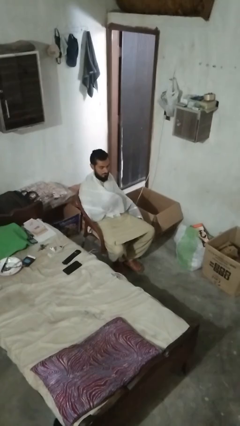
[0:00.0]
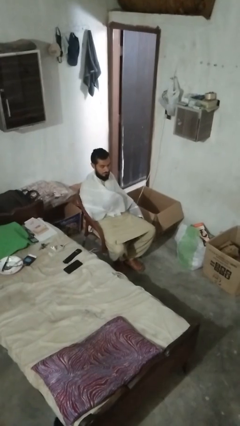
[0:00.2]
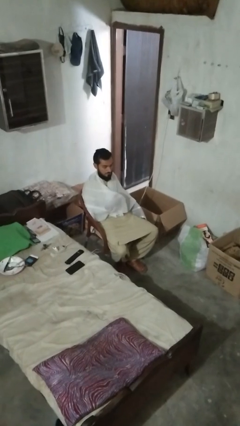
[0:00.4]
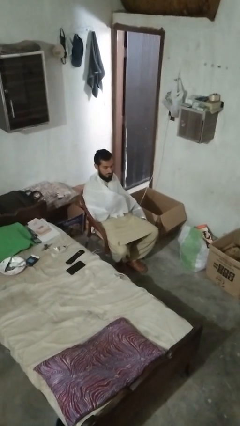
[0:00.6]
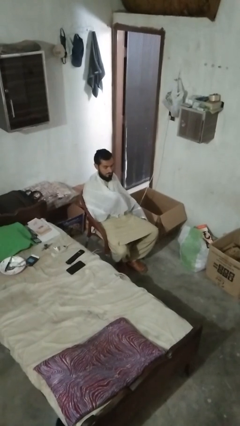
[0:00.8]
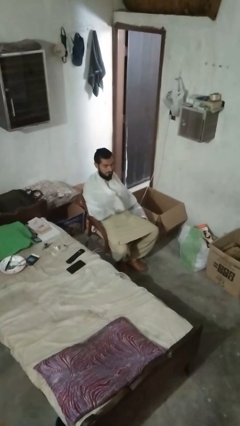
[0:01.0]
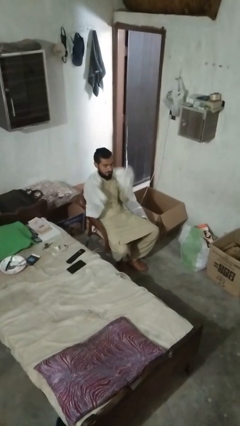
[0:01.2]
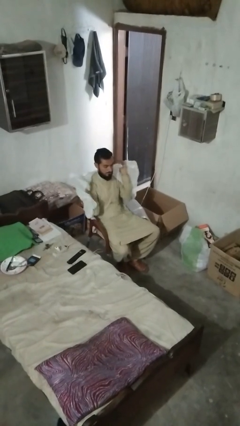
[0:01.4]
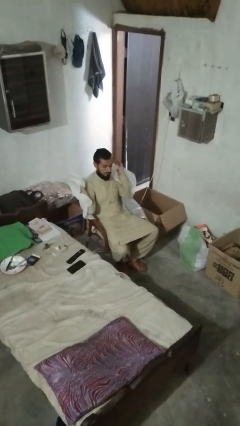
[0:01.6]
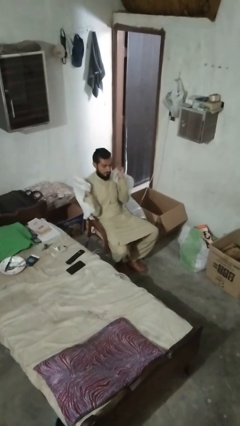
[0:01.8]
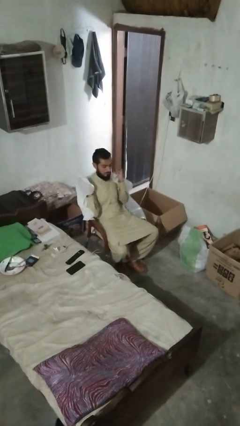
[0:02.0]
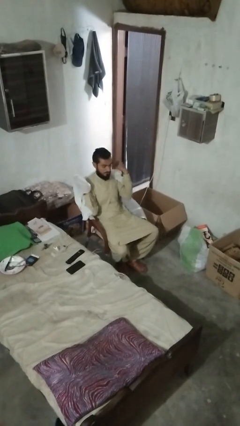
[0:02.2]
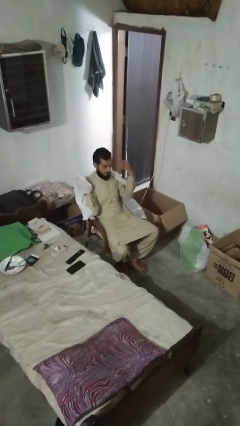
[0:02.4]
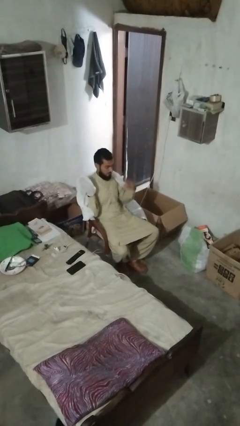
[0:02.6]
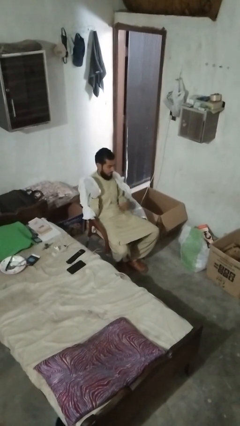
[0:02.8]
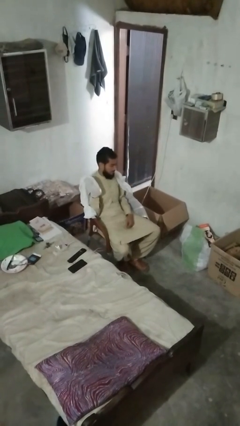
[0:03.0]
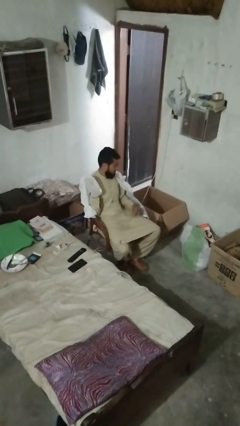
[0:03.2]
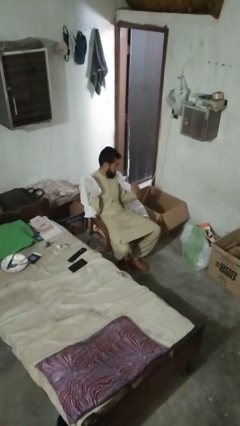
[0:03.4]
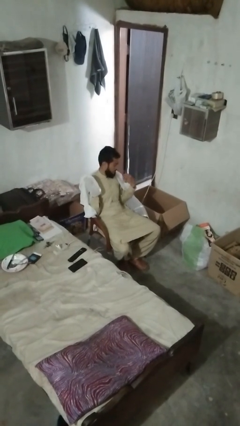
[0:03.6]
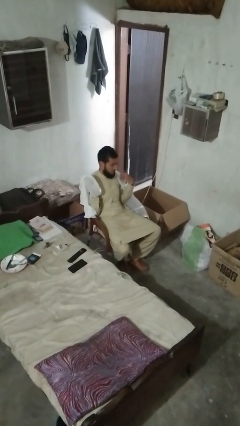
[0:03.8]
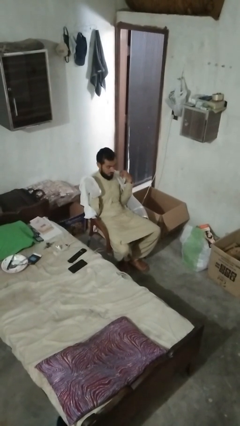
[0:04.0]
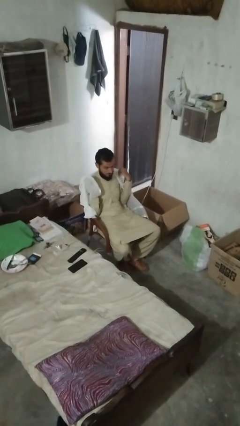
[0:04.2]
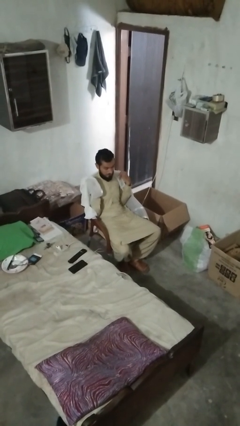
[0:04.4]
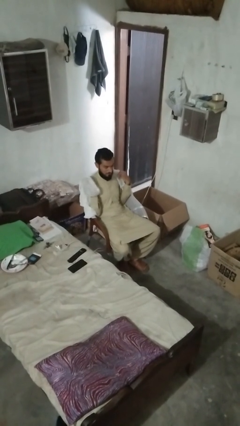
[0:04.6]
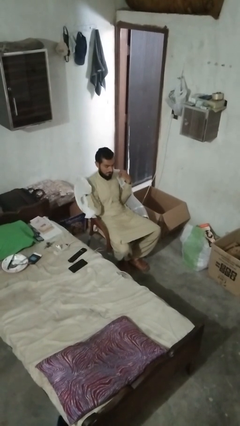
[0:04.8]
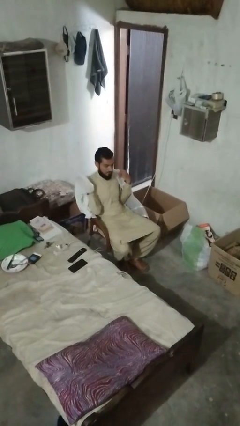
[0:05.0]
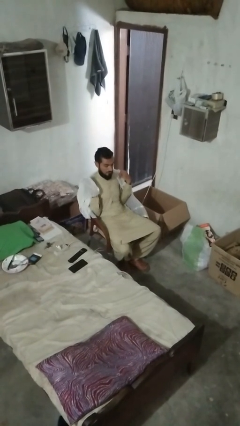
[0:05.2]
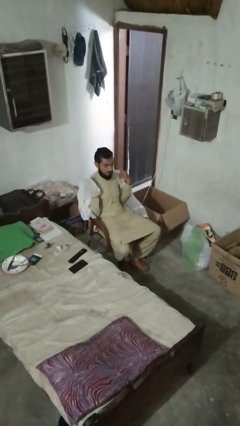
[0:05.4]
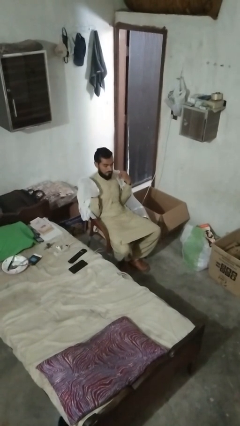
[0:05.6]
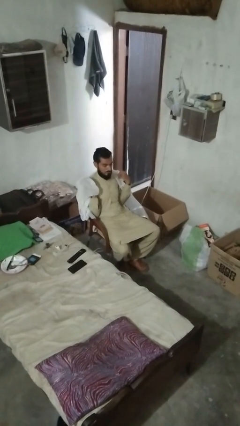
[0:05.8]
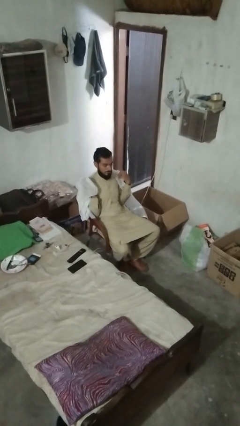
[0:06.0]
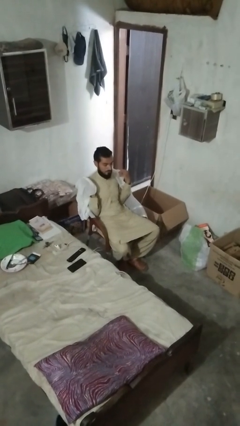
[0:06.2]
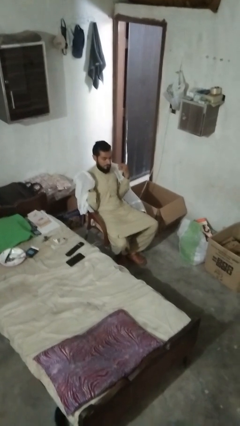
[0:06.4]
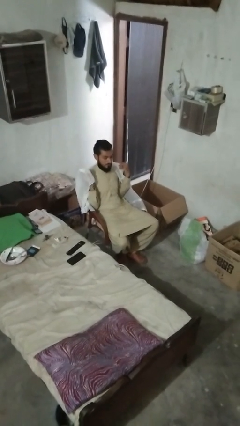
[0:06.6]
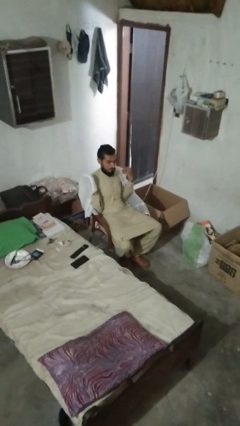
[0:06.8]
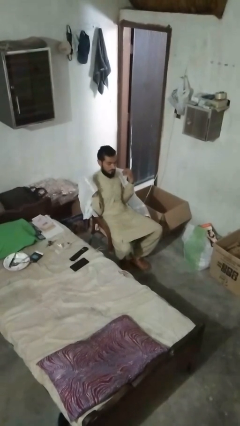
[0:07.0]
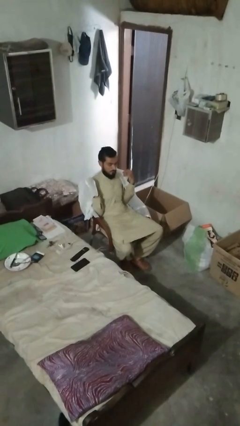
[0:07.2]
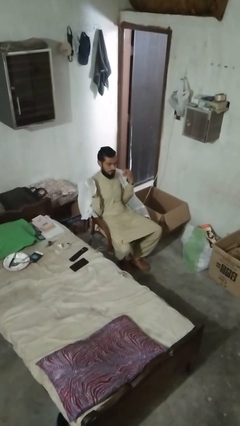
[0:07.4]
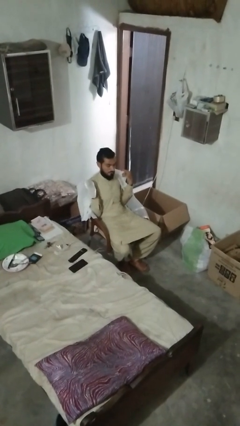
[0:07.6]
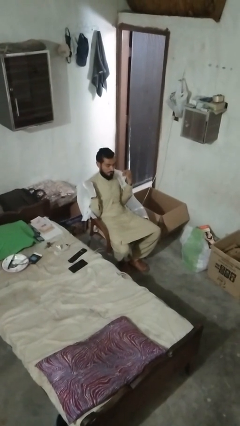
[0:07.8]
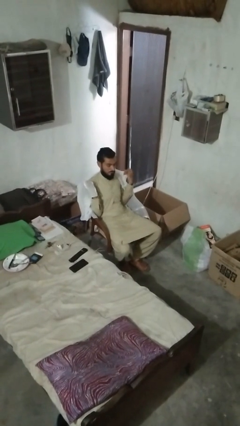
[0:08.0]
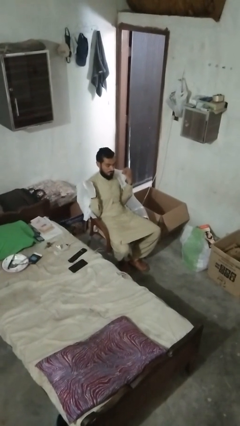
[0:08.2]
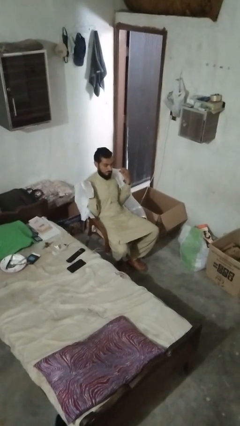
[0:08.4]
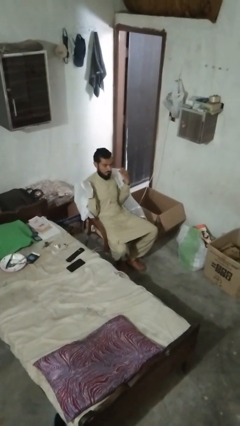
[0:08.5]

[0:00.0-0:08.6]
person uncovers with blanket

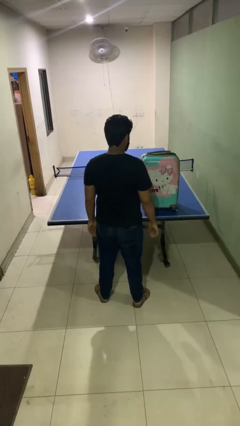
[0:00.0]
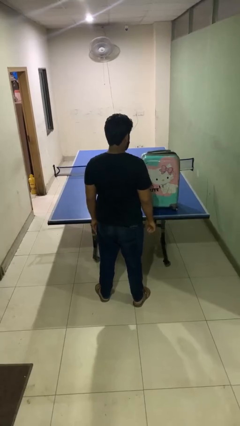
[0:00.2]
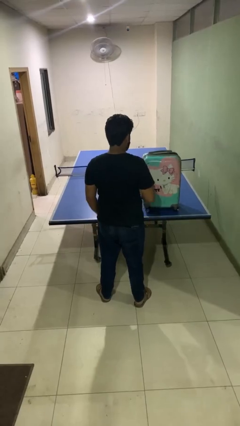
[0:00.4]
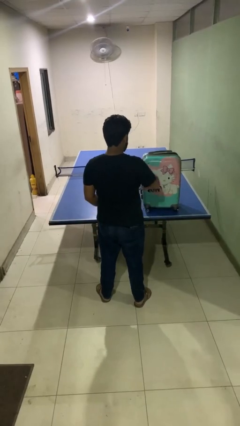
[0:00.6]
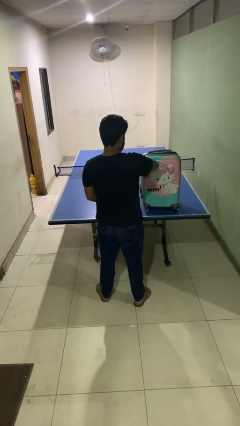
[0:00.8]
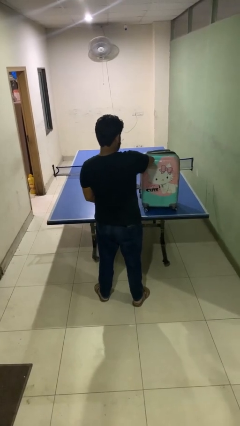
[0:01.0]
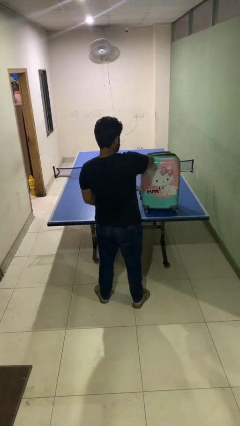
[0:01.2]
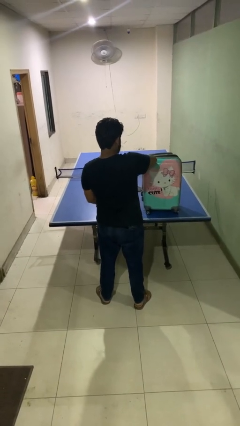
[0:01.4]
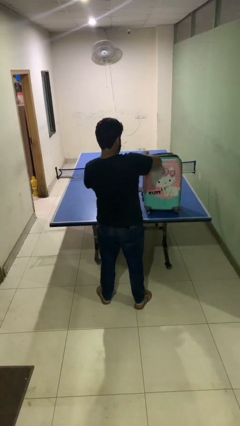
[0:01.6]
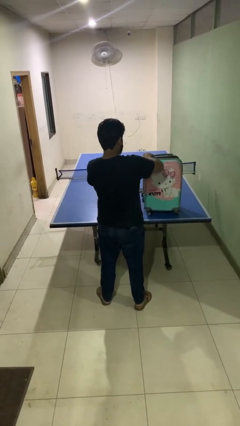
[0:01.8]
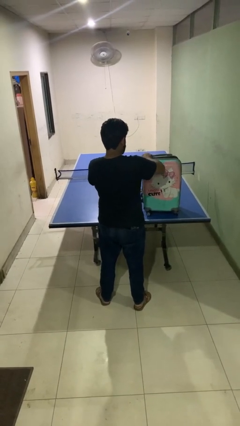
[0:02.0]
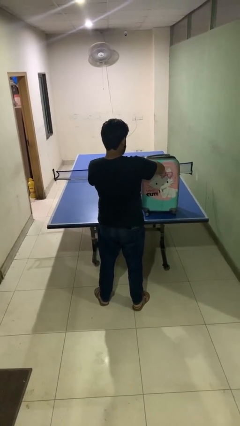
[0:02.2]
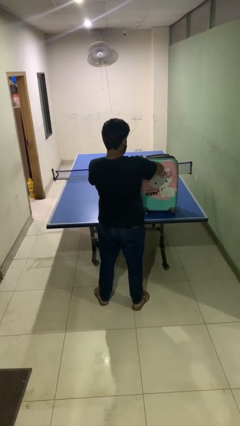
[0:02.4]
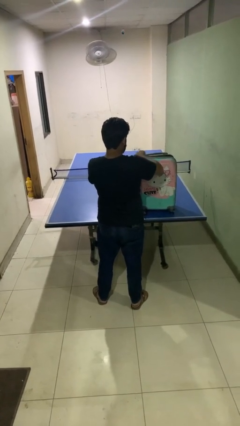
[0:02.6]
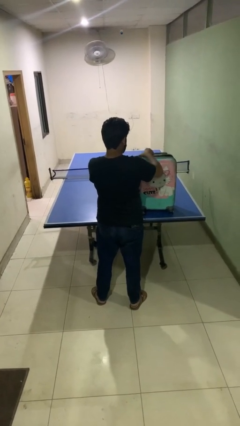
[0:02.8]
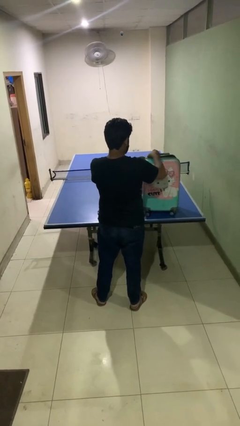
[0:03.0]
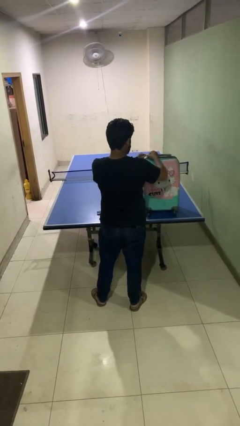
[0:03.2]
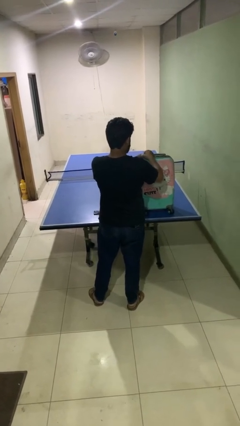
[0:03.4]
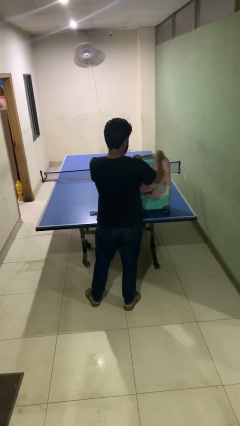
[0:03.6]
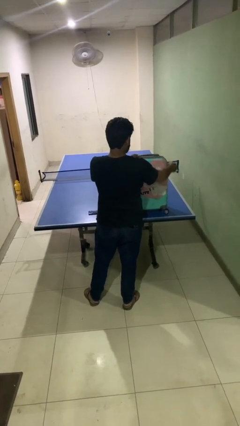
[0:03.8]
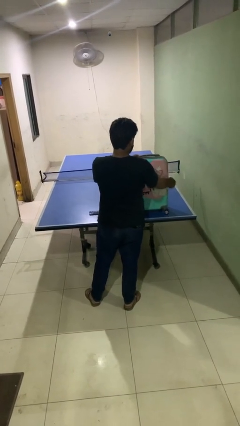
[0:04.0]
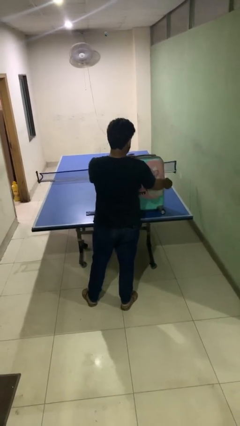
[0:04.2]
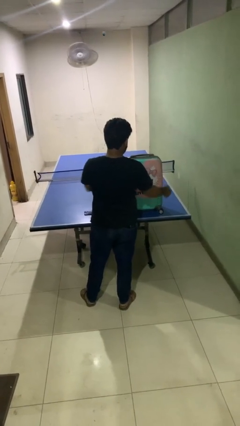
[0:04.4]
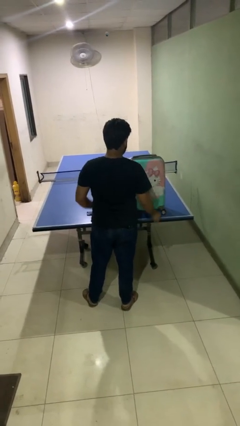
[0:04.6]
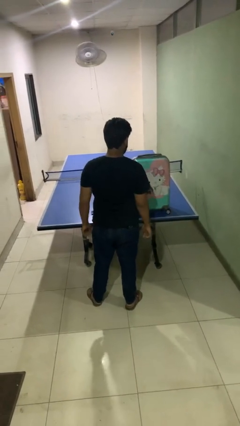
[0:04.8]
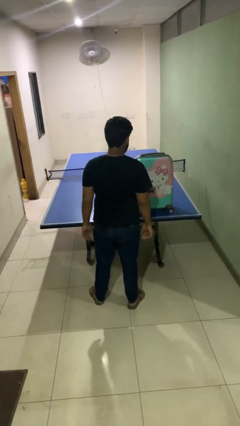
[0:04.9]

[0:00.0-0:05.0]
person closes suitcase

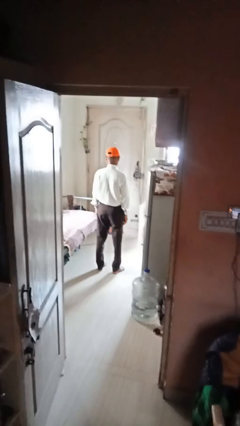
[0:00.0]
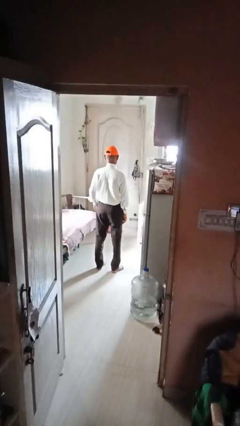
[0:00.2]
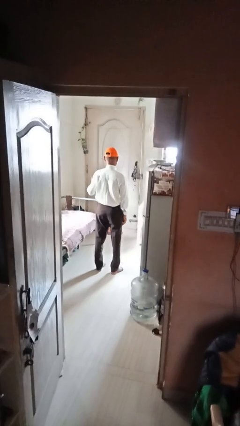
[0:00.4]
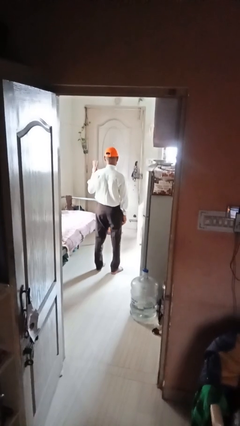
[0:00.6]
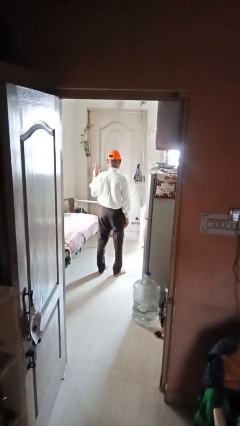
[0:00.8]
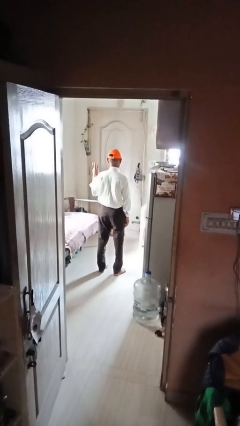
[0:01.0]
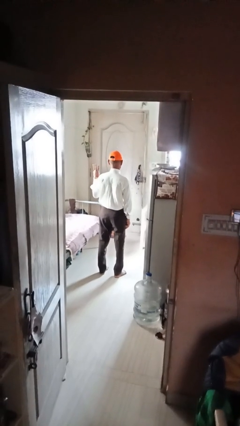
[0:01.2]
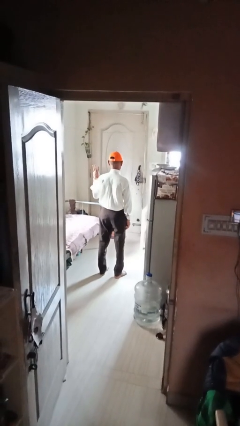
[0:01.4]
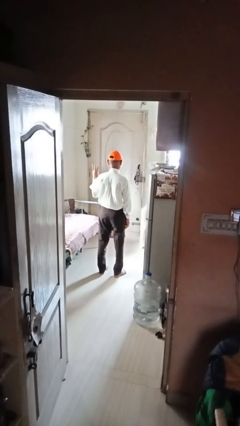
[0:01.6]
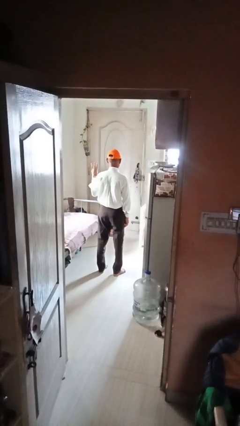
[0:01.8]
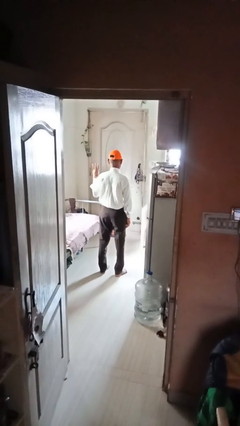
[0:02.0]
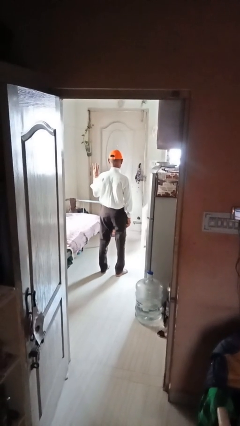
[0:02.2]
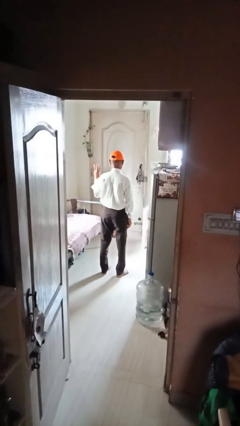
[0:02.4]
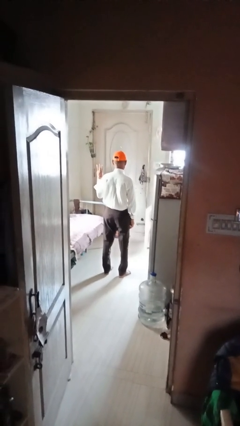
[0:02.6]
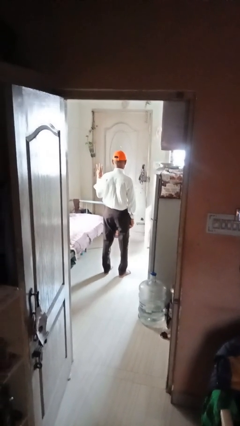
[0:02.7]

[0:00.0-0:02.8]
person gestures number three

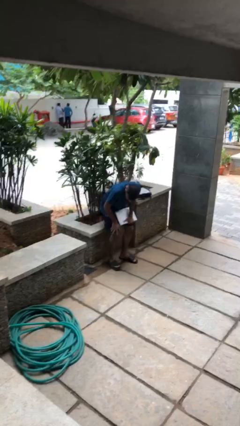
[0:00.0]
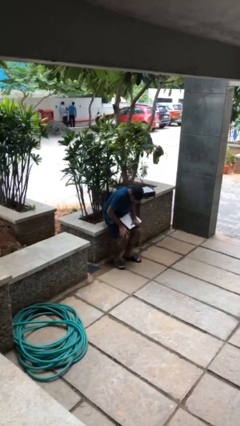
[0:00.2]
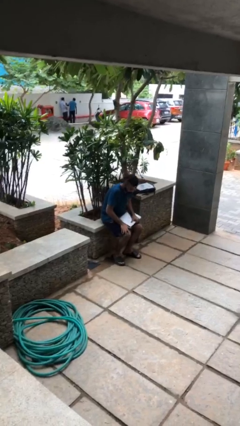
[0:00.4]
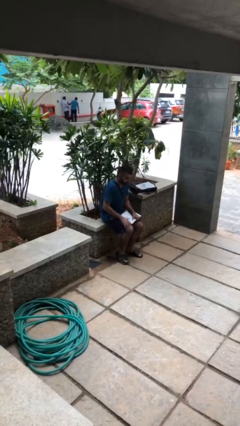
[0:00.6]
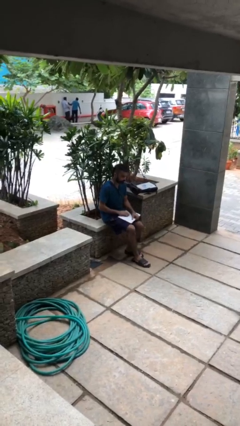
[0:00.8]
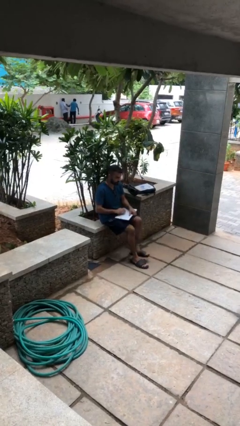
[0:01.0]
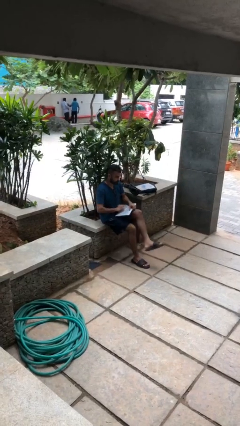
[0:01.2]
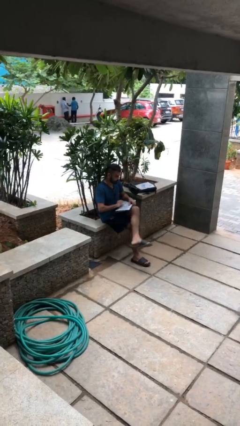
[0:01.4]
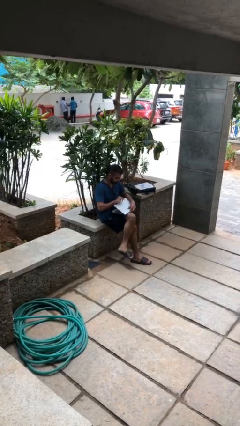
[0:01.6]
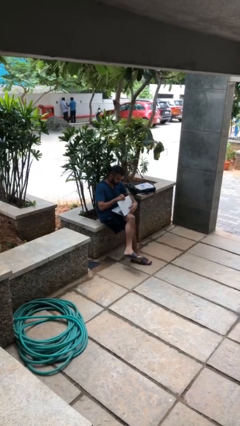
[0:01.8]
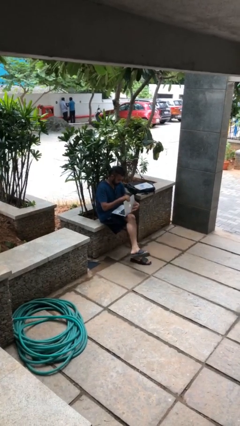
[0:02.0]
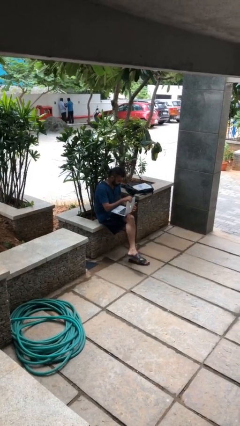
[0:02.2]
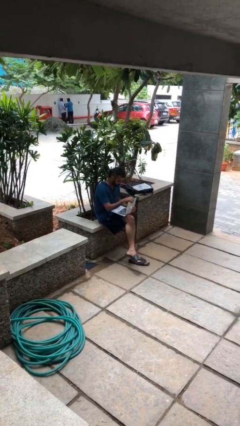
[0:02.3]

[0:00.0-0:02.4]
person sits down
